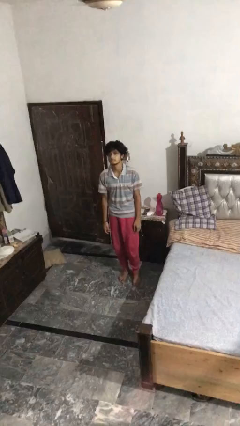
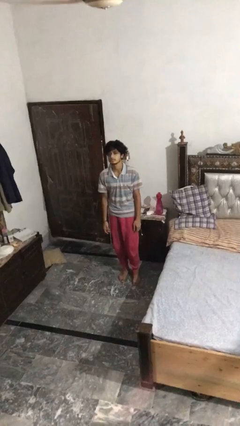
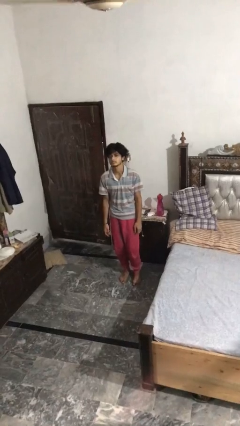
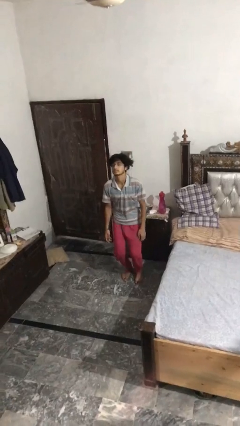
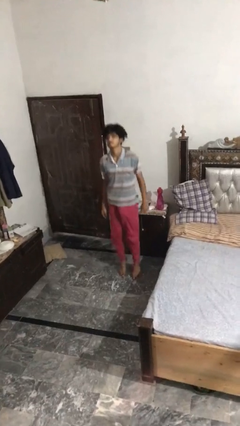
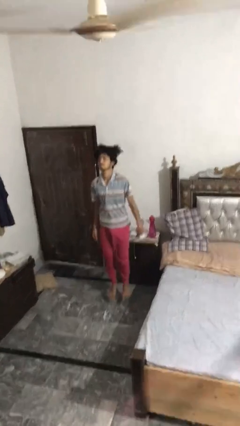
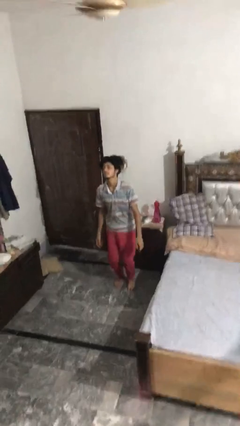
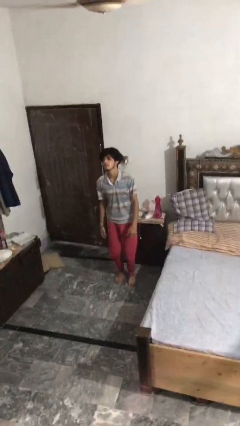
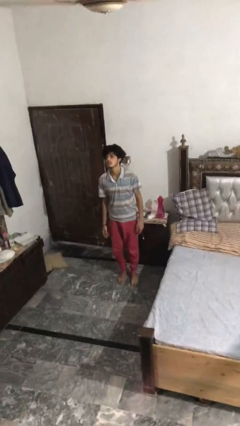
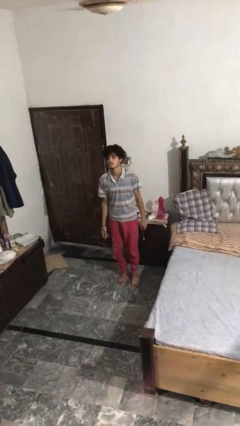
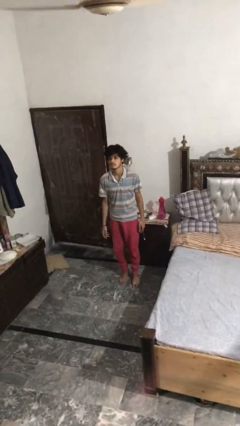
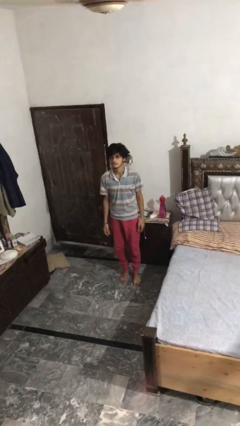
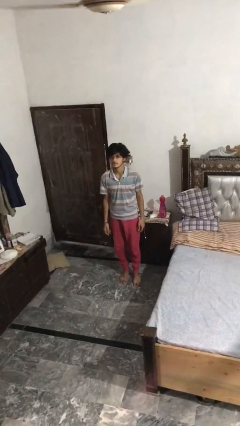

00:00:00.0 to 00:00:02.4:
person jumps

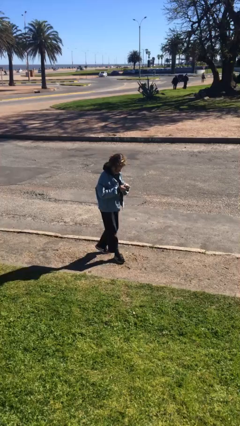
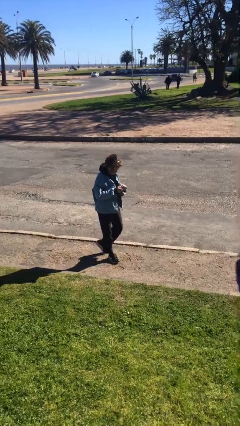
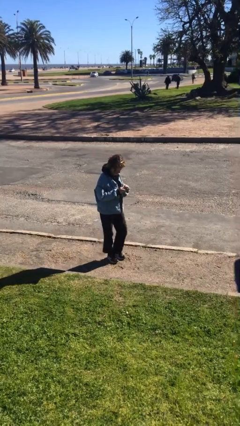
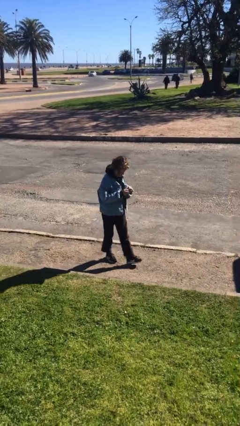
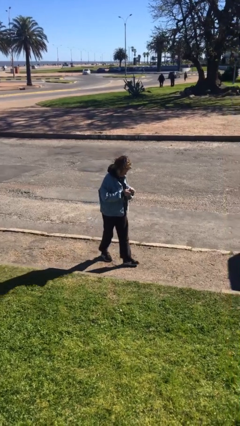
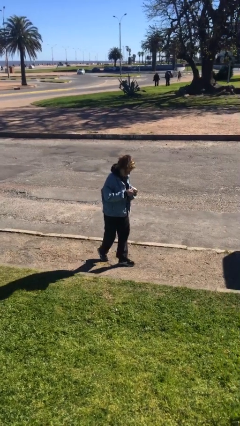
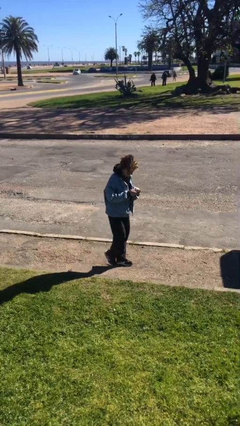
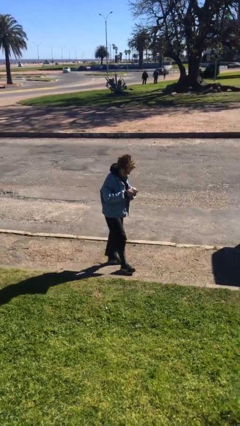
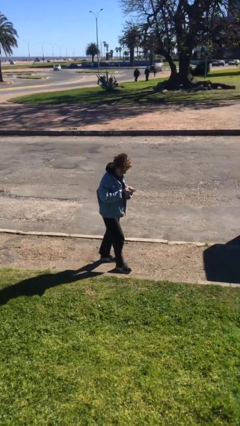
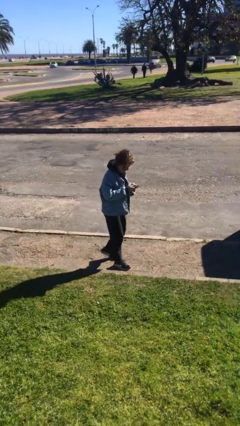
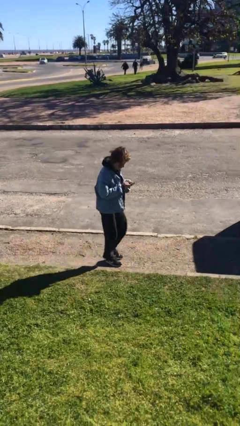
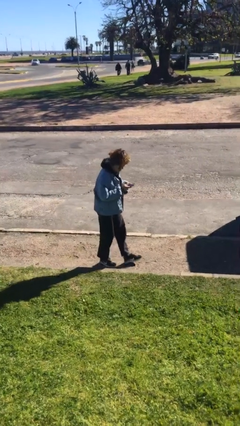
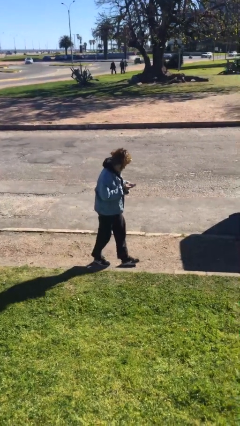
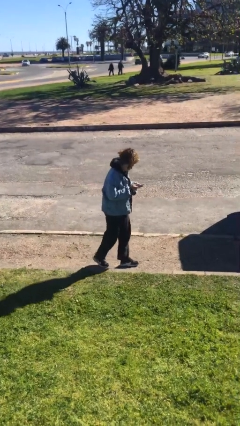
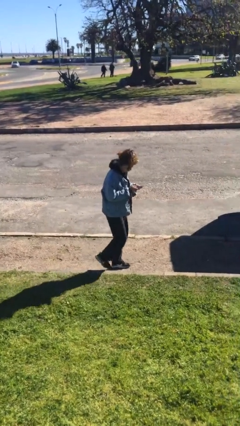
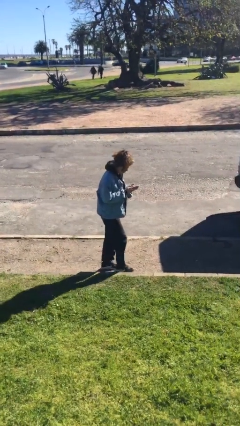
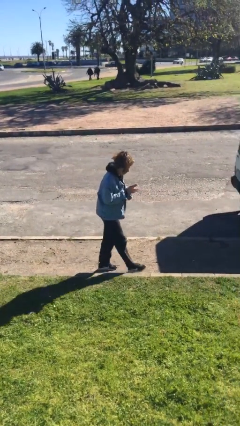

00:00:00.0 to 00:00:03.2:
person texts on phone

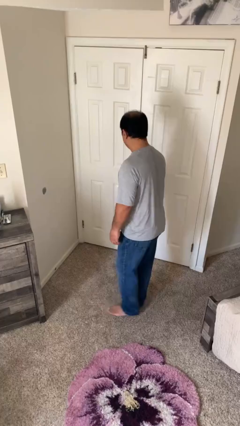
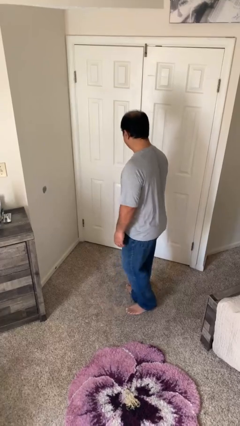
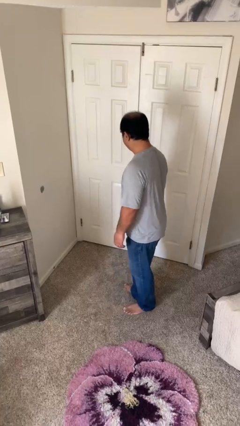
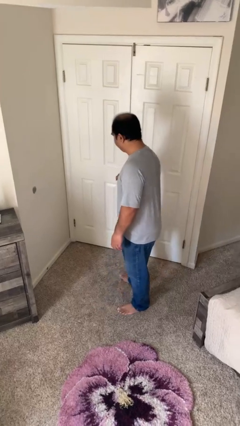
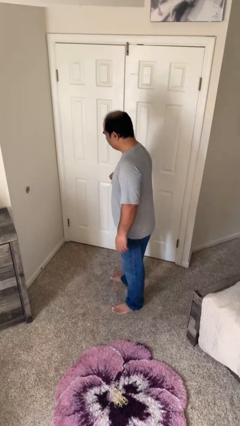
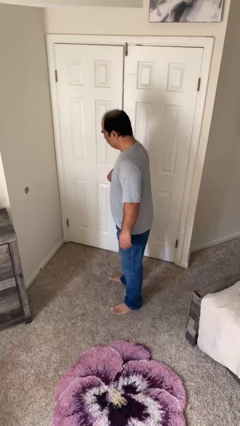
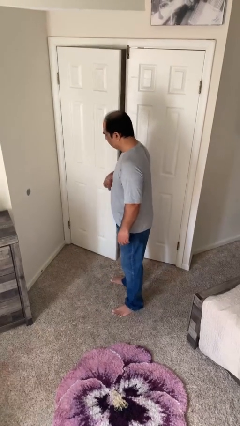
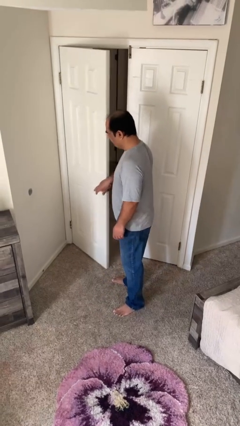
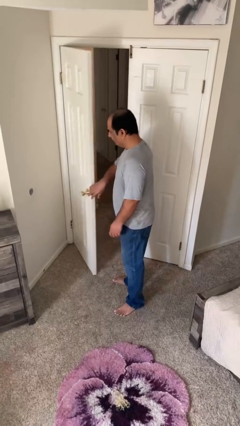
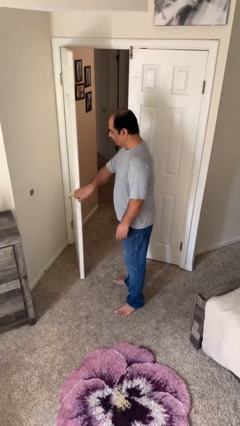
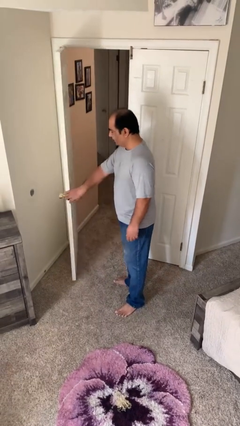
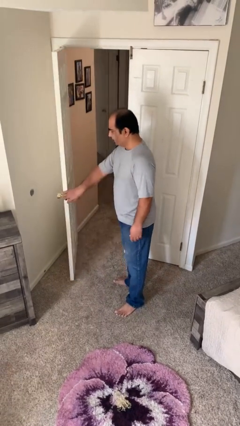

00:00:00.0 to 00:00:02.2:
person opens facility door

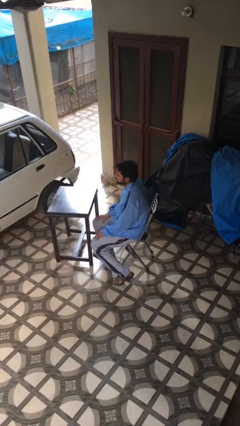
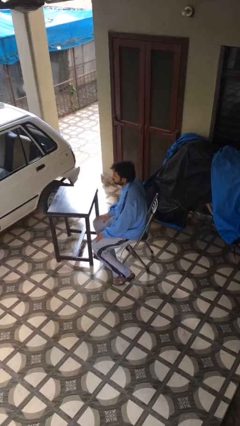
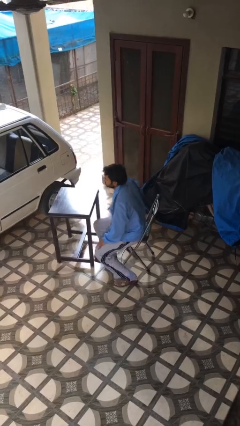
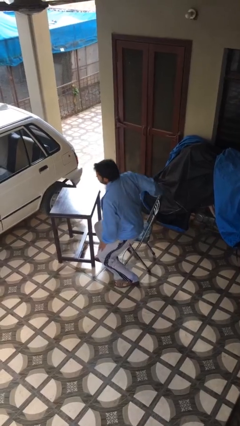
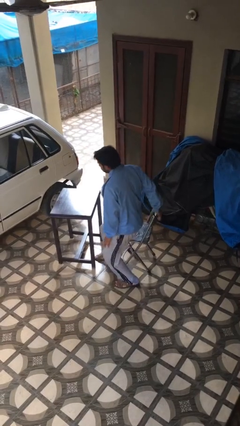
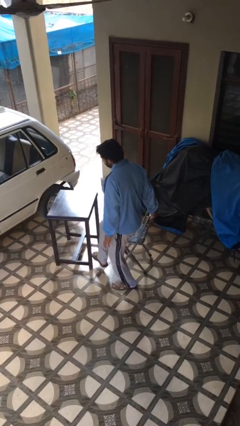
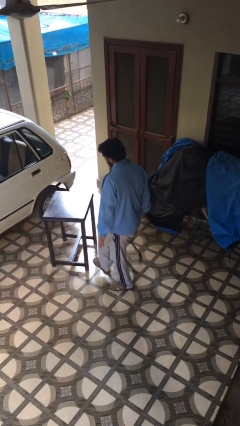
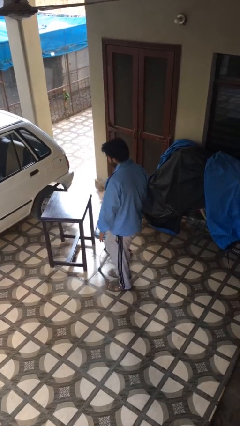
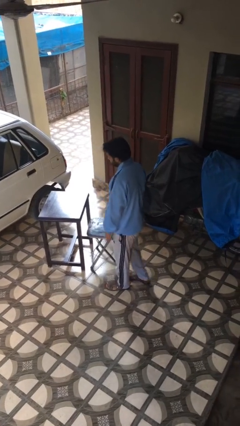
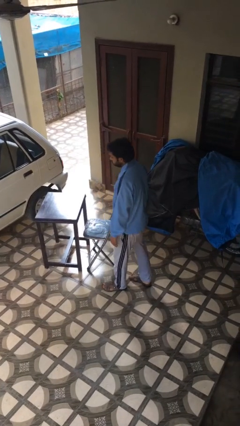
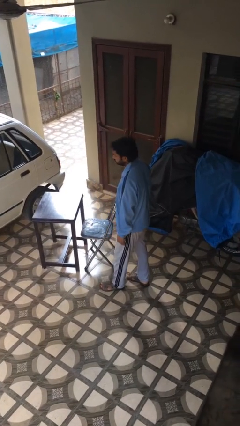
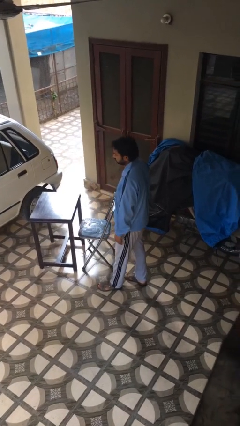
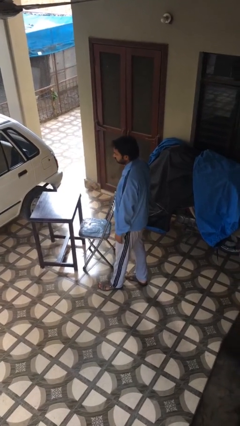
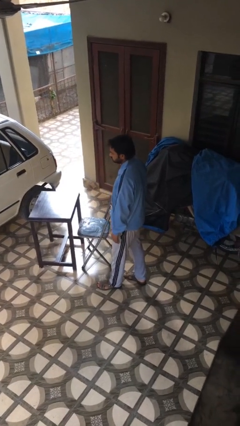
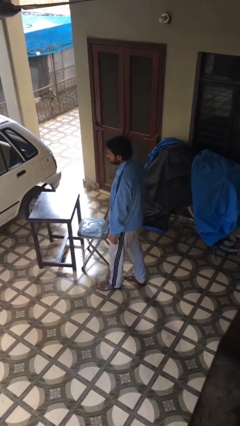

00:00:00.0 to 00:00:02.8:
person stands up

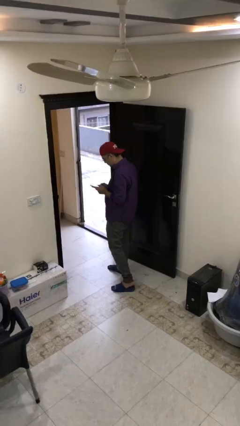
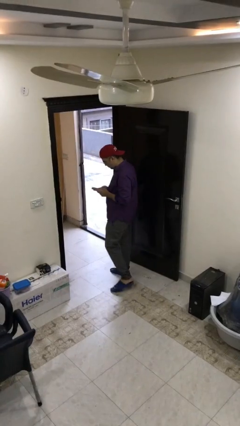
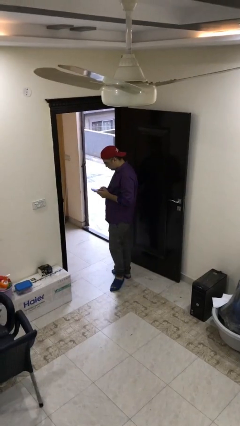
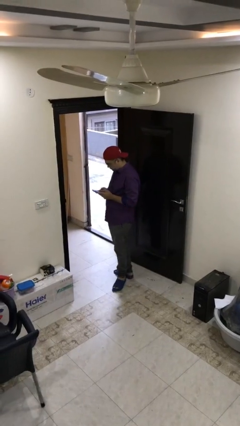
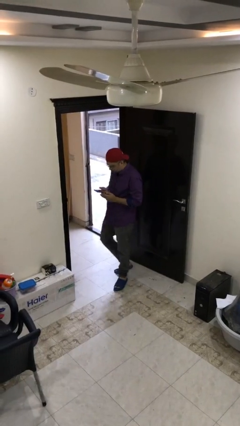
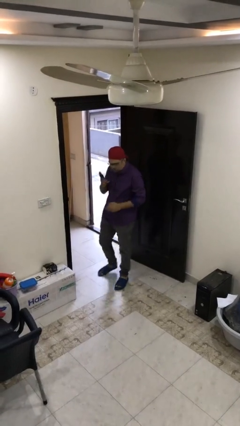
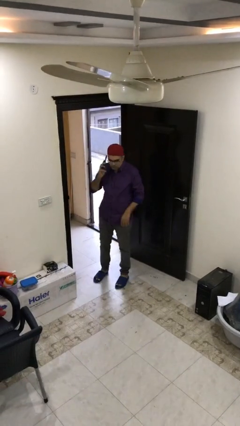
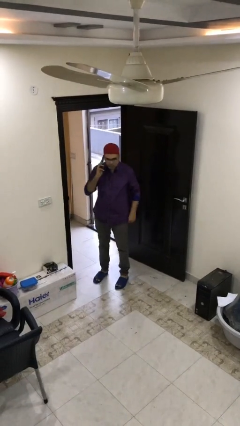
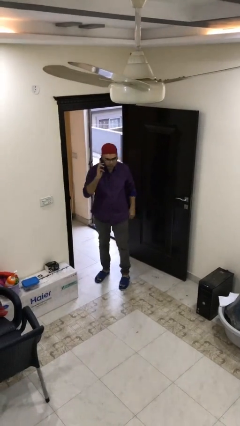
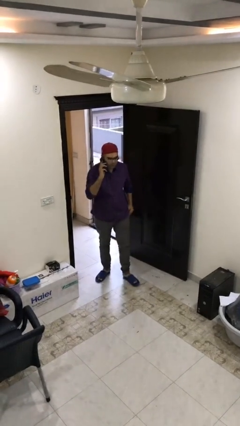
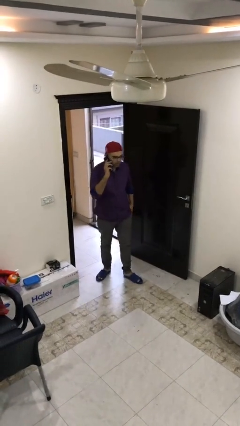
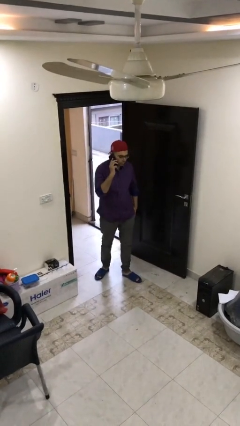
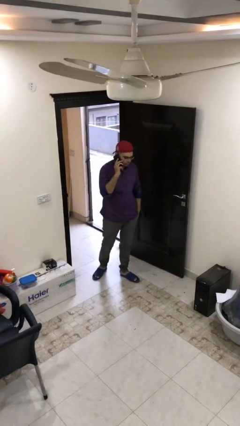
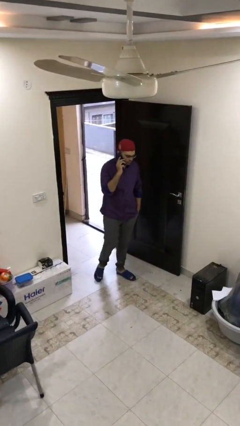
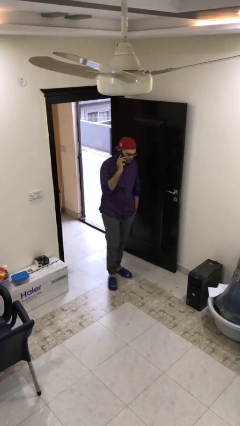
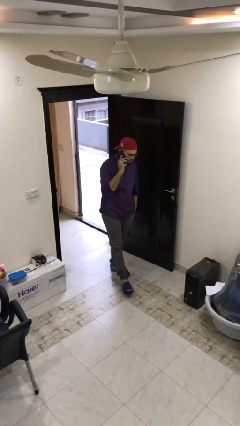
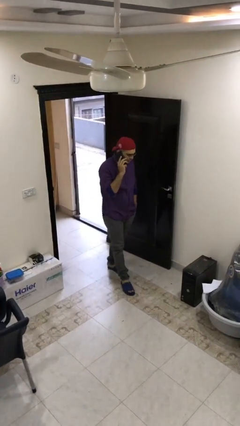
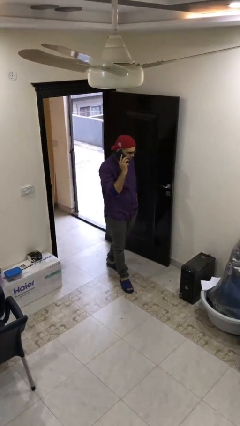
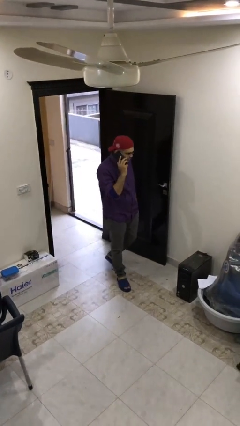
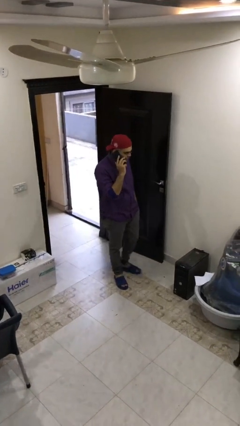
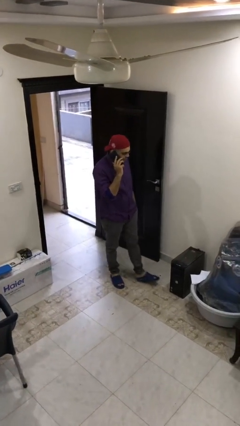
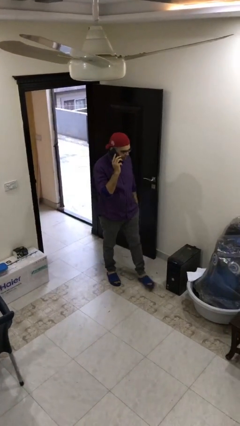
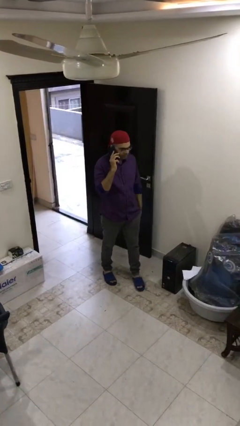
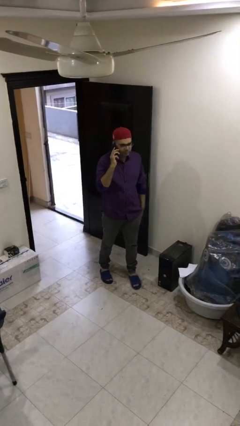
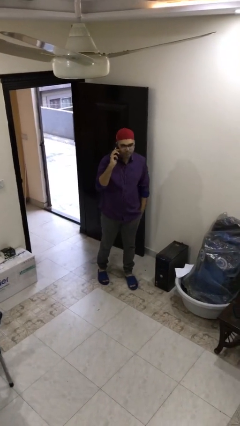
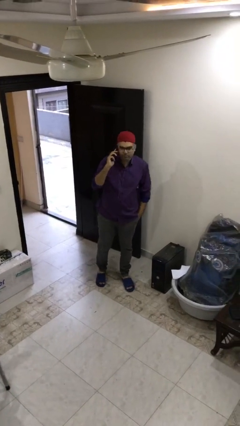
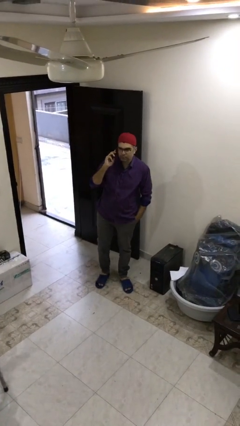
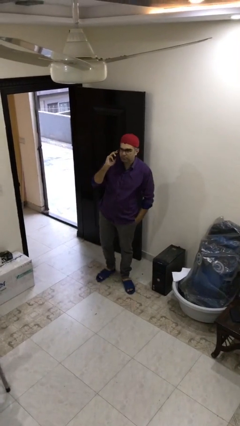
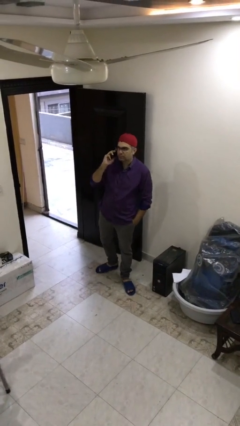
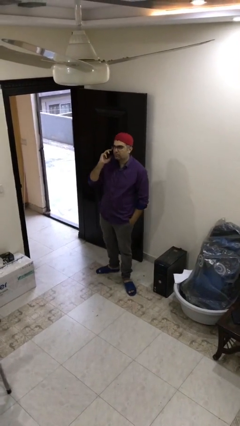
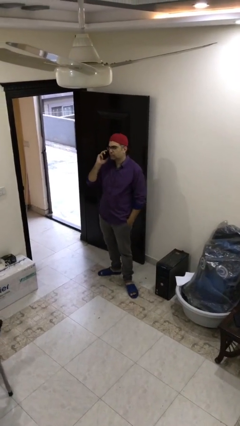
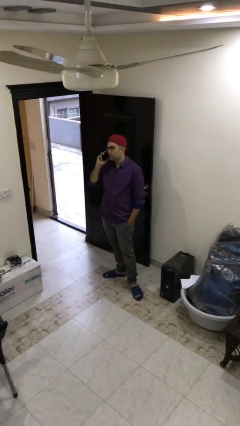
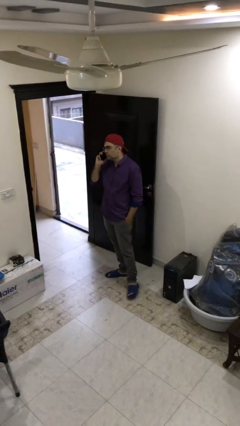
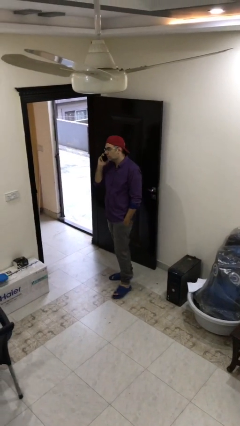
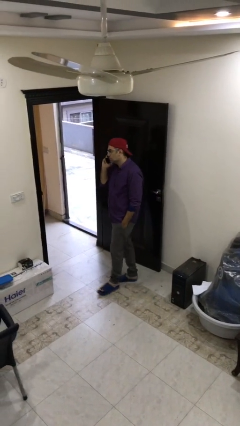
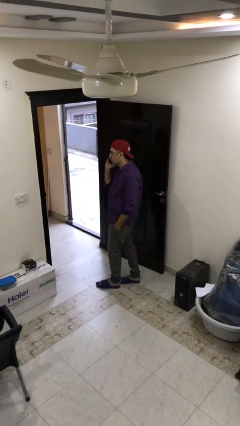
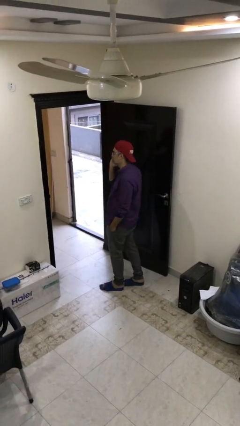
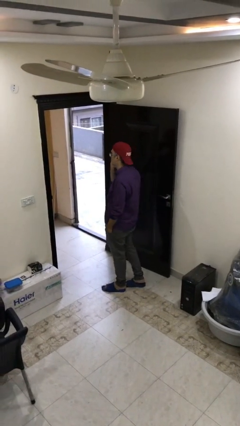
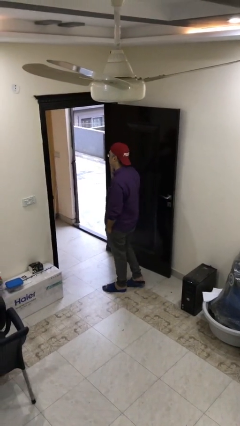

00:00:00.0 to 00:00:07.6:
person talks on phone
